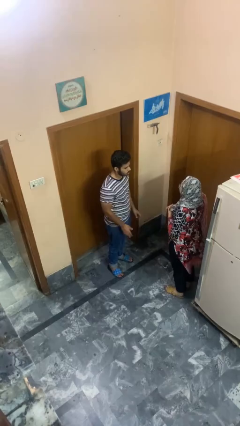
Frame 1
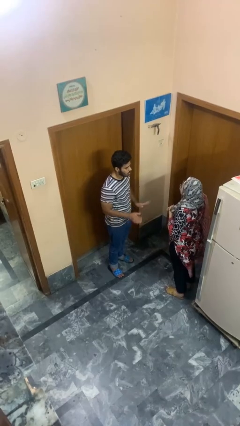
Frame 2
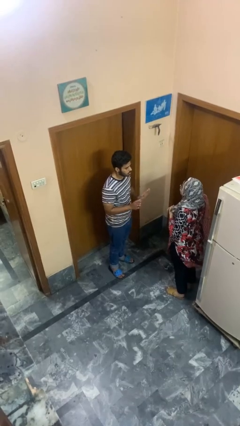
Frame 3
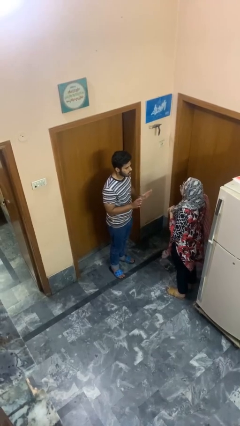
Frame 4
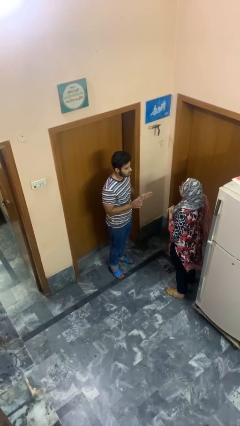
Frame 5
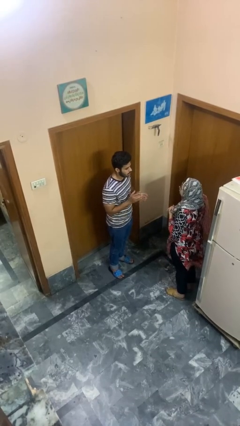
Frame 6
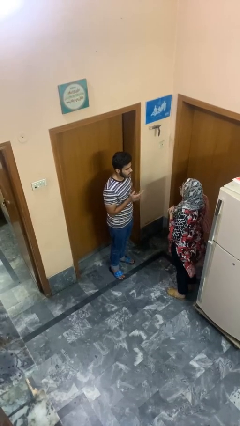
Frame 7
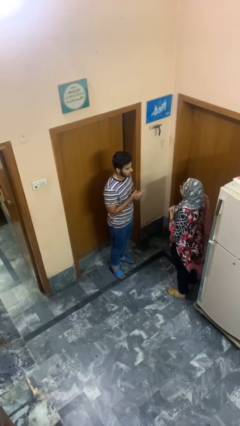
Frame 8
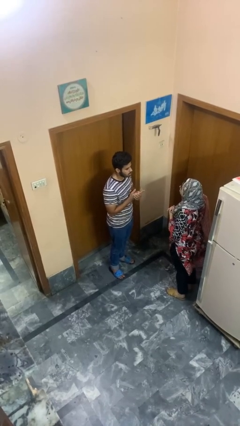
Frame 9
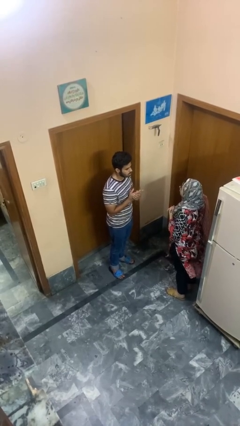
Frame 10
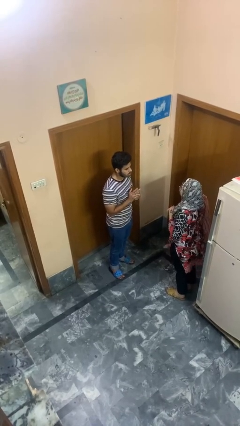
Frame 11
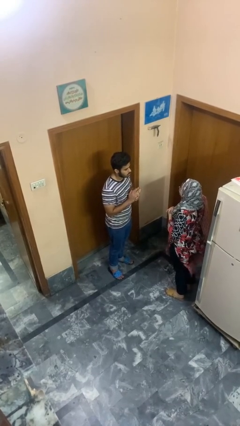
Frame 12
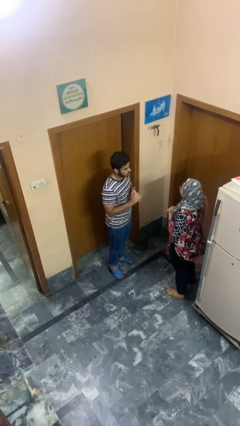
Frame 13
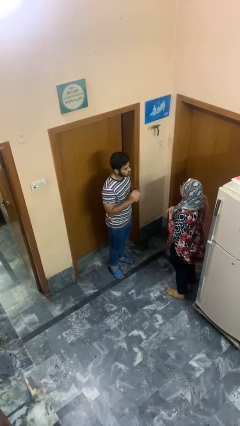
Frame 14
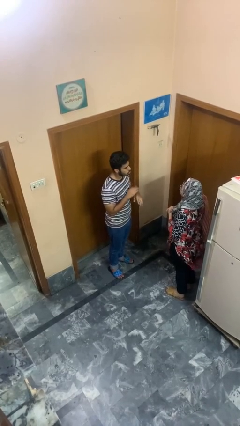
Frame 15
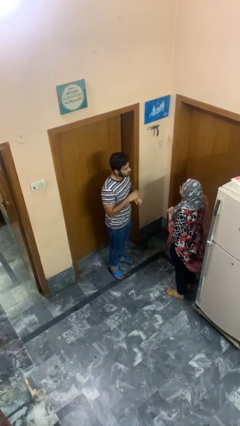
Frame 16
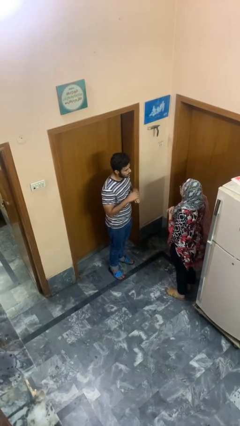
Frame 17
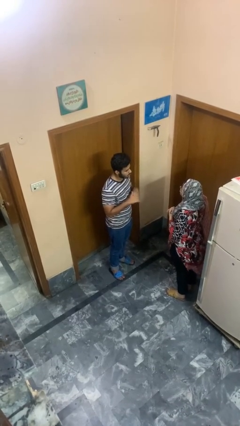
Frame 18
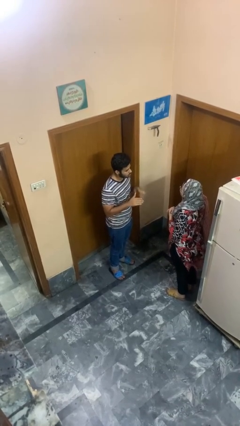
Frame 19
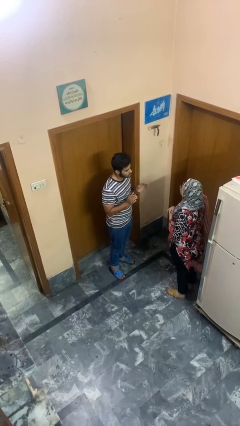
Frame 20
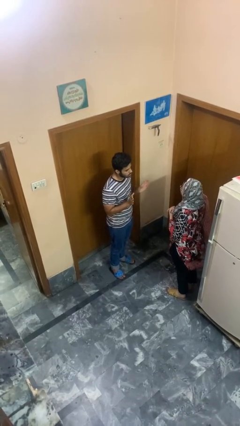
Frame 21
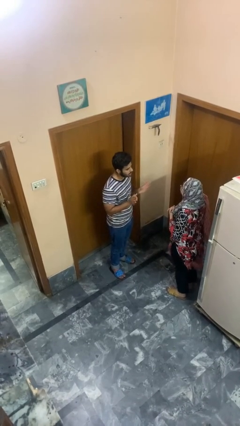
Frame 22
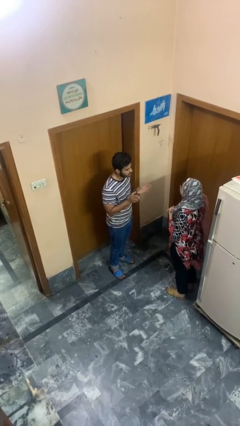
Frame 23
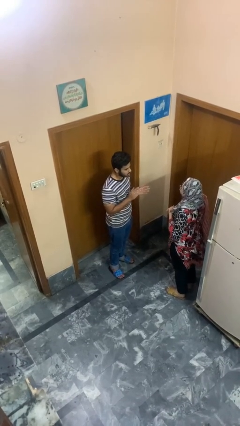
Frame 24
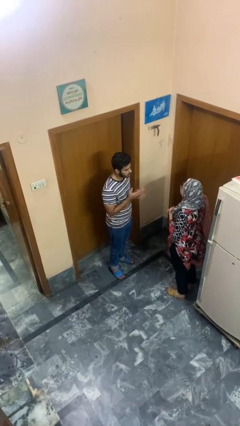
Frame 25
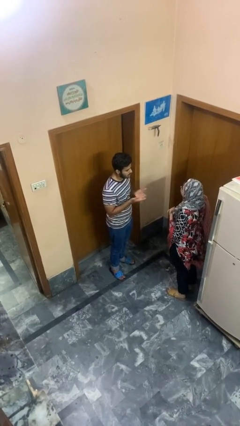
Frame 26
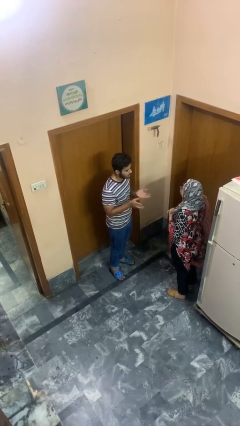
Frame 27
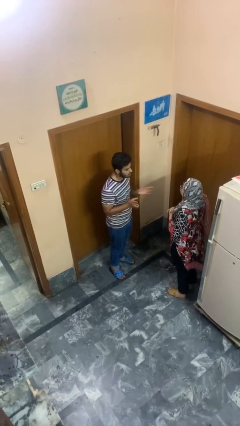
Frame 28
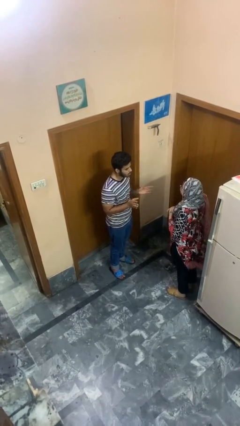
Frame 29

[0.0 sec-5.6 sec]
person talks to person

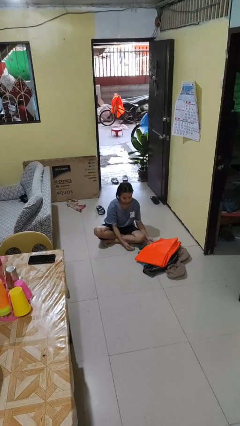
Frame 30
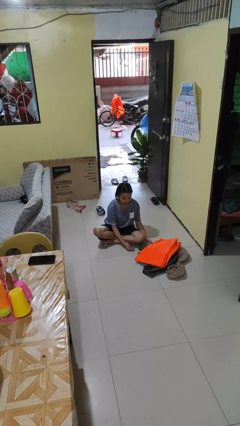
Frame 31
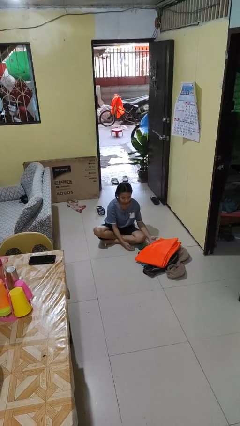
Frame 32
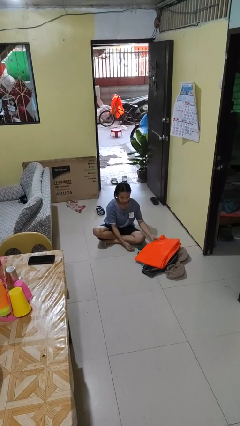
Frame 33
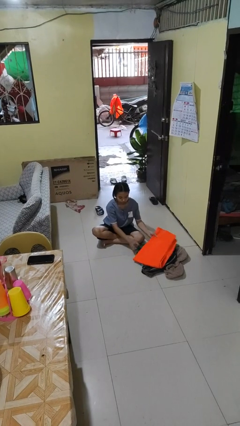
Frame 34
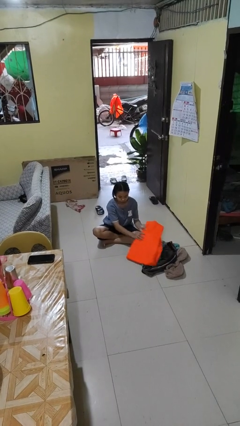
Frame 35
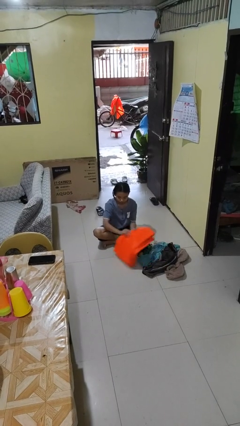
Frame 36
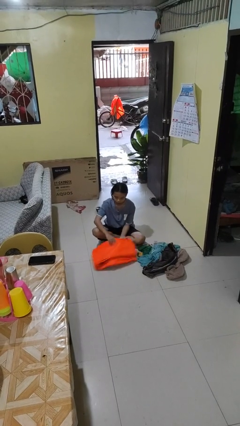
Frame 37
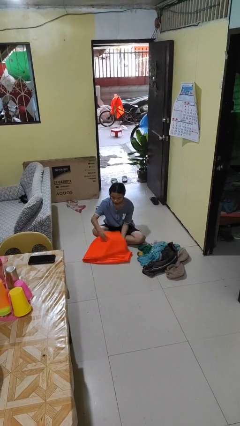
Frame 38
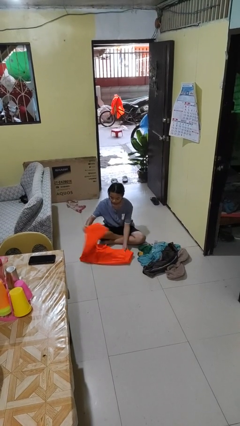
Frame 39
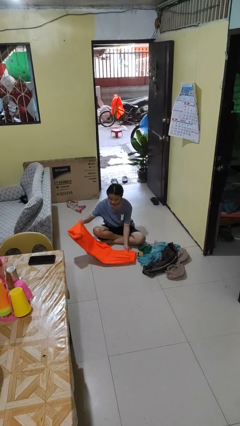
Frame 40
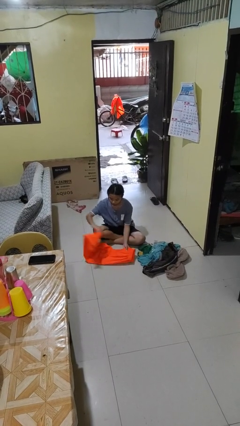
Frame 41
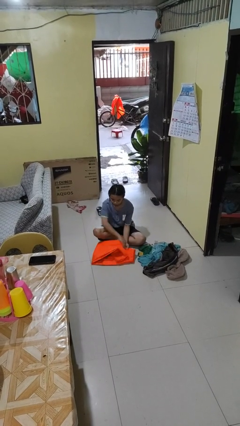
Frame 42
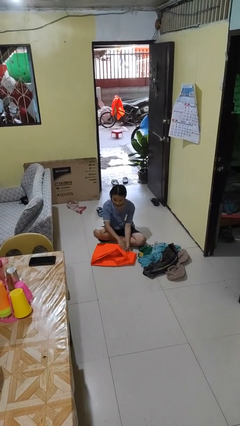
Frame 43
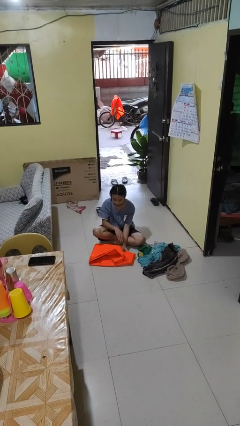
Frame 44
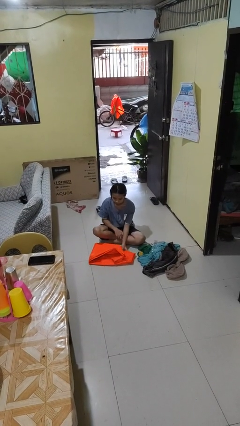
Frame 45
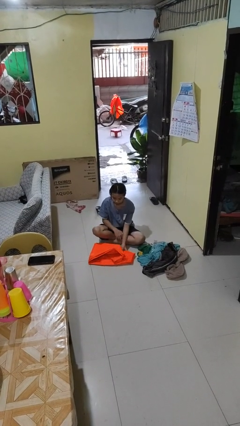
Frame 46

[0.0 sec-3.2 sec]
person folds pants

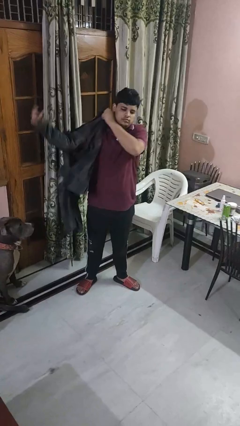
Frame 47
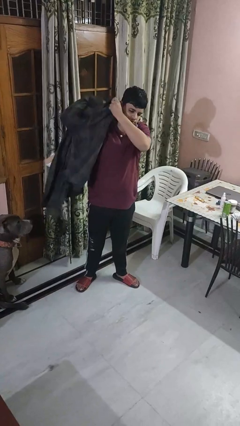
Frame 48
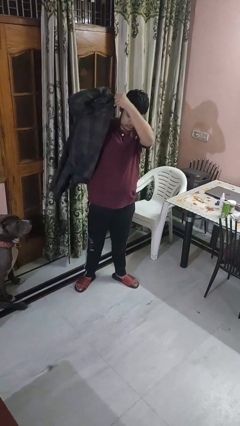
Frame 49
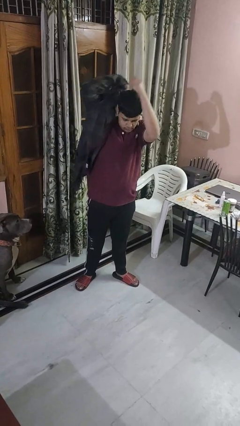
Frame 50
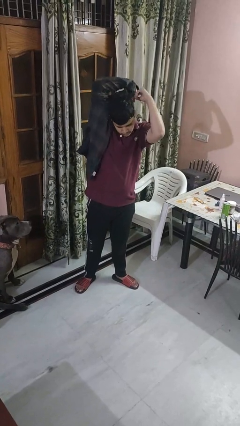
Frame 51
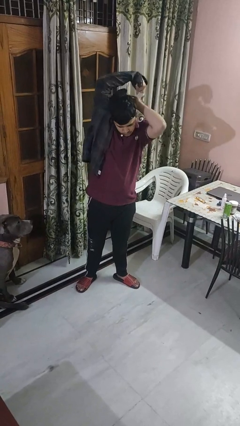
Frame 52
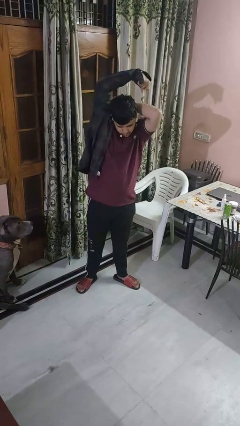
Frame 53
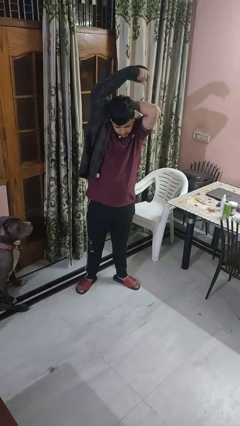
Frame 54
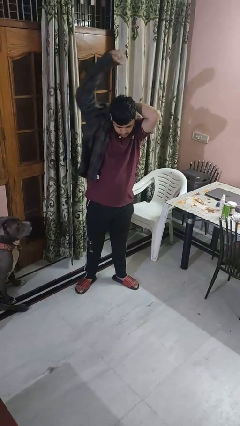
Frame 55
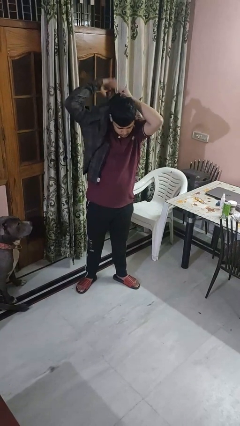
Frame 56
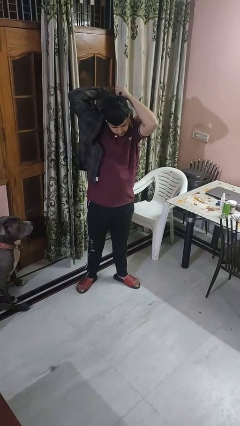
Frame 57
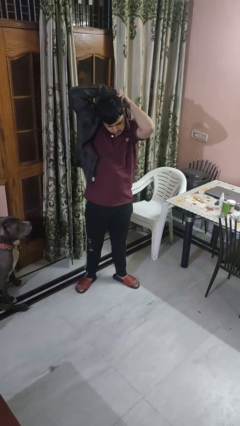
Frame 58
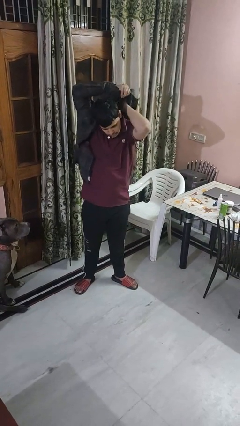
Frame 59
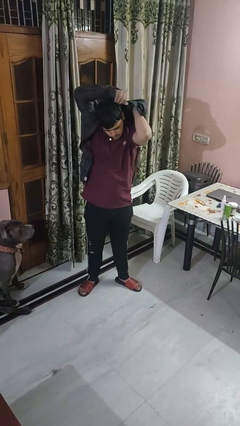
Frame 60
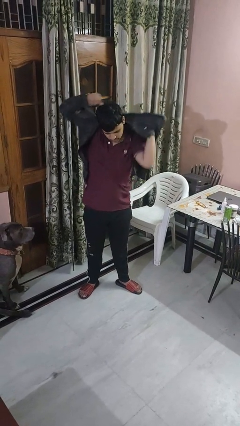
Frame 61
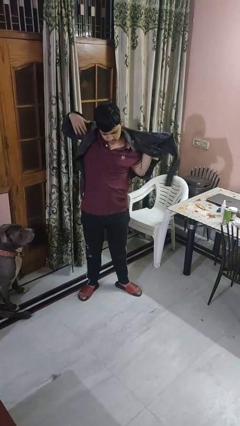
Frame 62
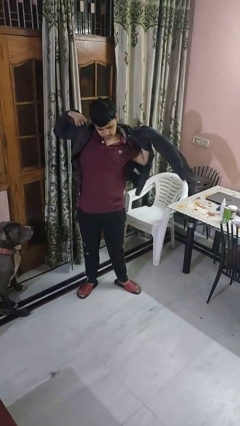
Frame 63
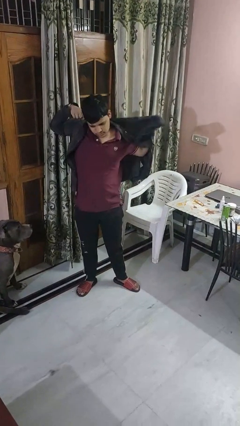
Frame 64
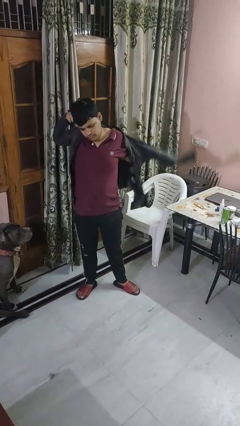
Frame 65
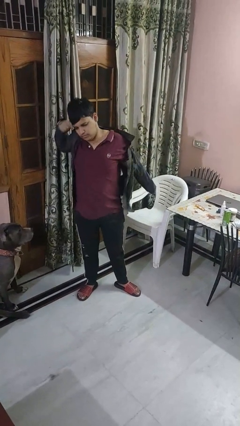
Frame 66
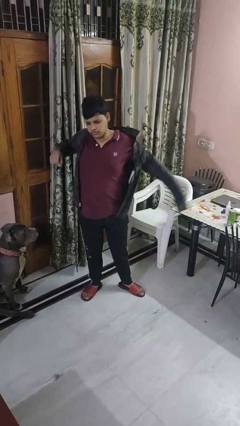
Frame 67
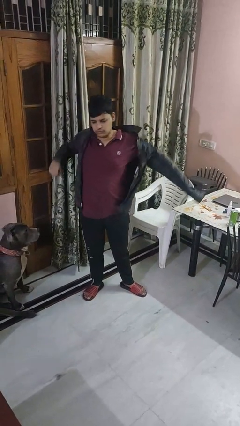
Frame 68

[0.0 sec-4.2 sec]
person puts on shirt

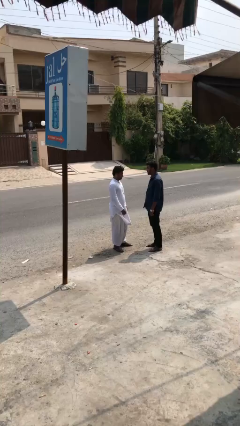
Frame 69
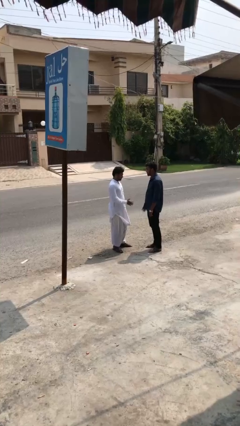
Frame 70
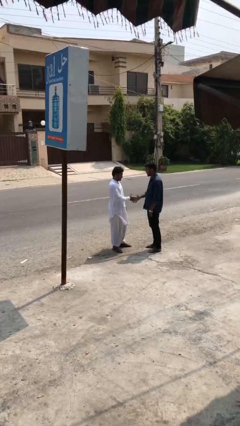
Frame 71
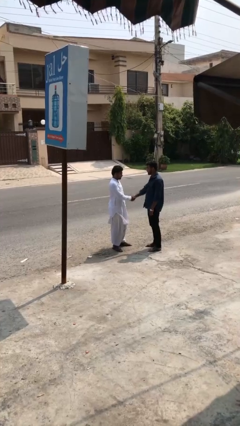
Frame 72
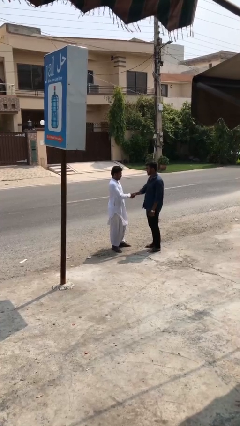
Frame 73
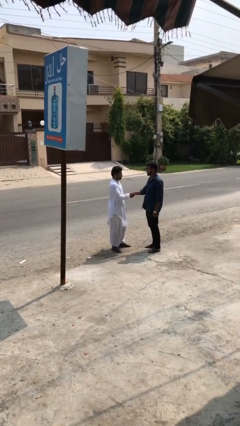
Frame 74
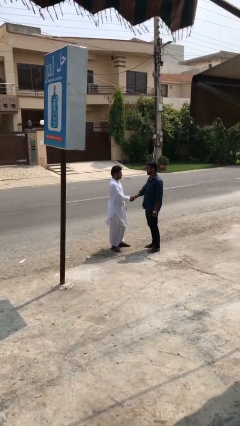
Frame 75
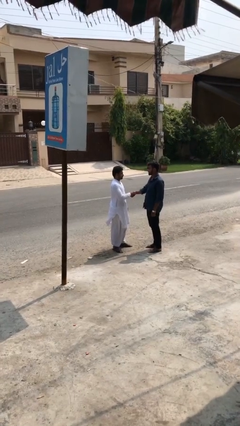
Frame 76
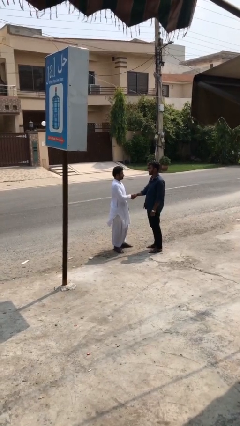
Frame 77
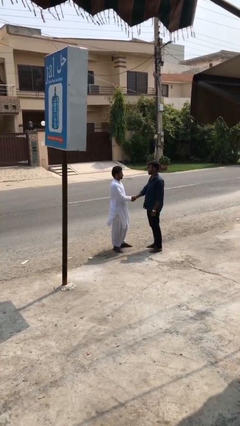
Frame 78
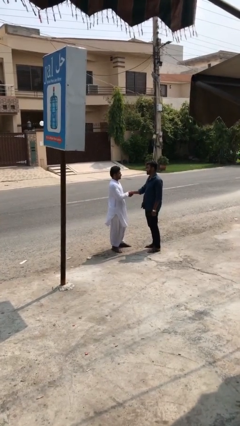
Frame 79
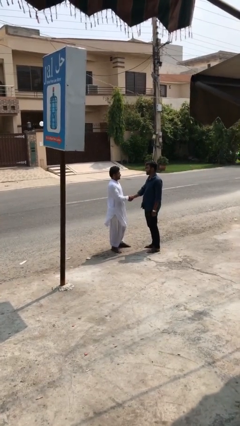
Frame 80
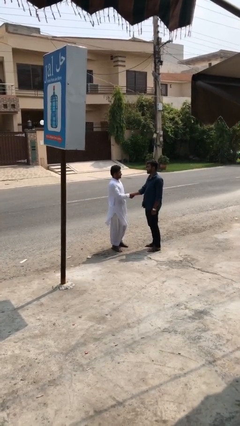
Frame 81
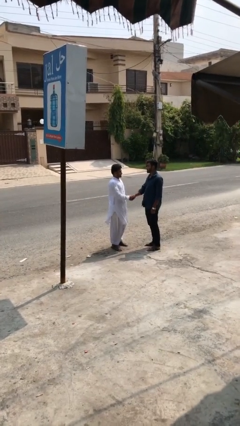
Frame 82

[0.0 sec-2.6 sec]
person shakes hand

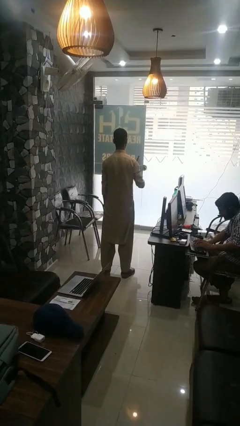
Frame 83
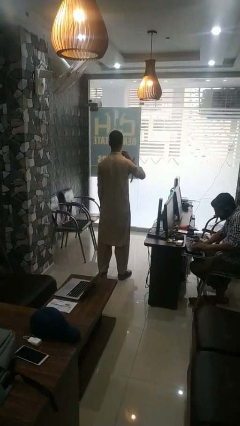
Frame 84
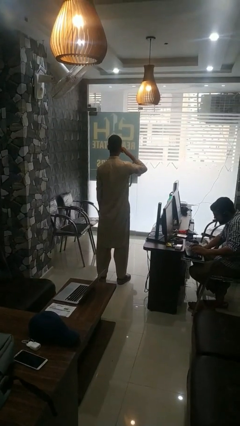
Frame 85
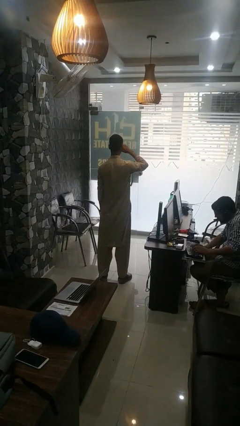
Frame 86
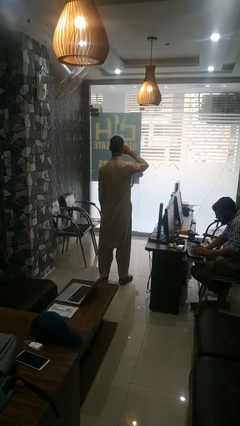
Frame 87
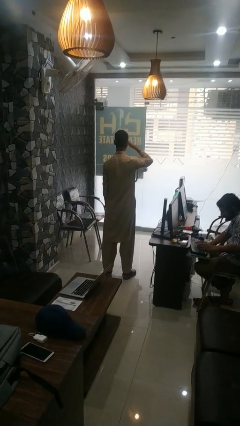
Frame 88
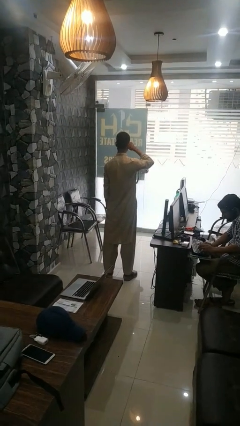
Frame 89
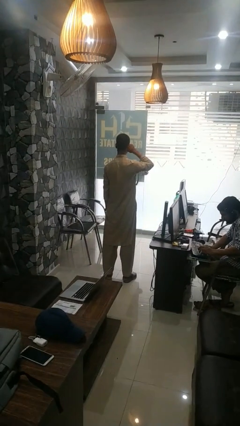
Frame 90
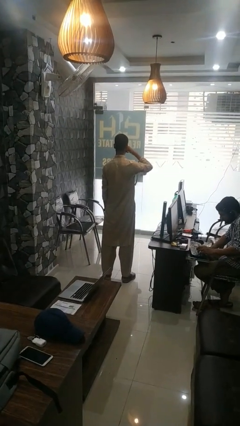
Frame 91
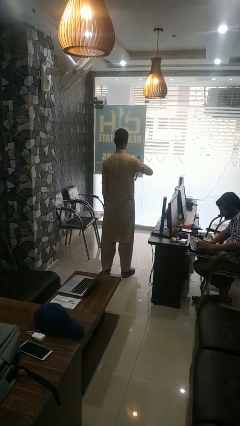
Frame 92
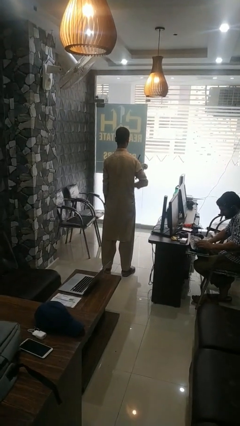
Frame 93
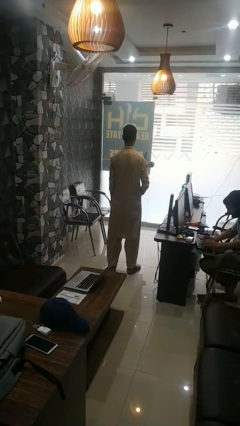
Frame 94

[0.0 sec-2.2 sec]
person rubs eyes
